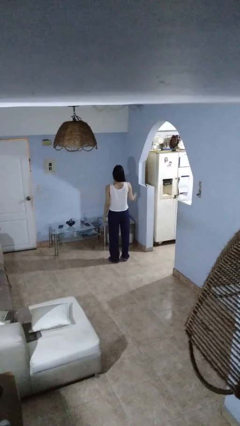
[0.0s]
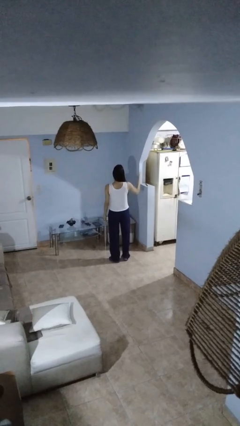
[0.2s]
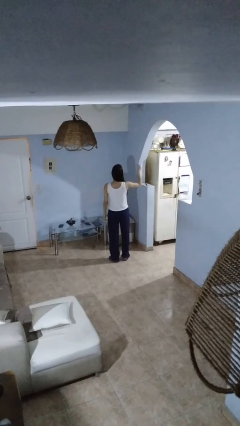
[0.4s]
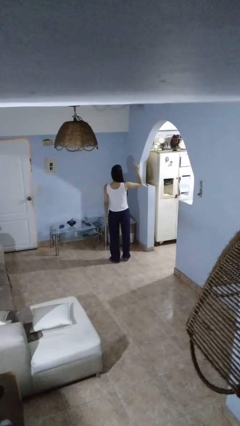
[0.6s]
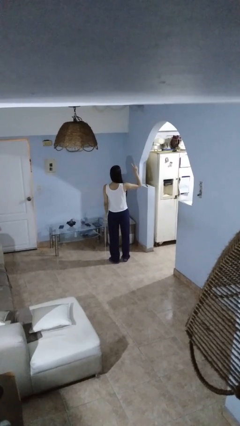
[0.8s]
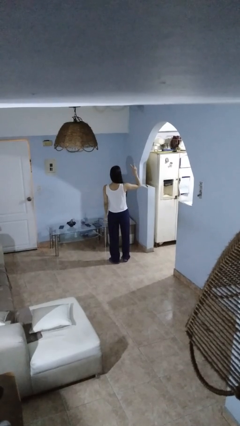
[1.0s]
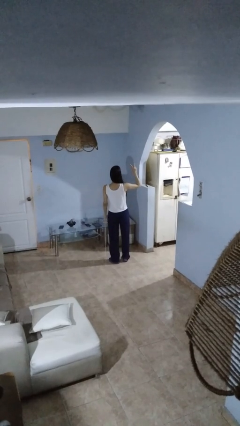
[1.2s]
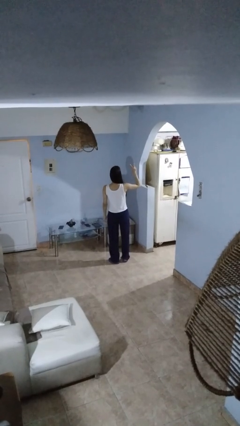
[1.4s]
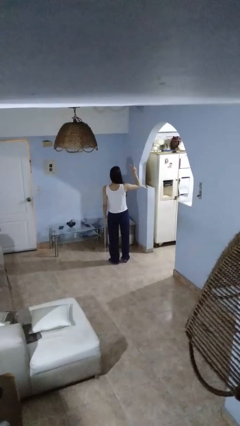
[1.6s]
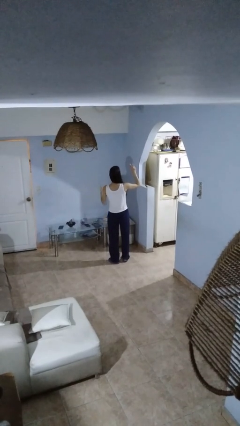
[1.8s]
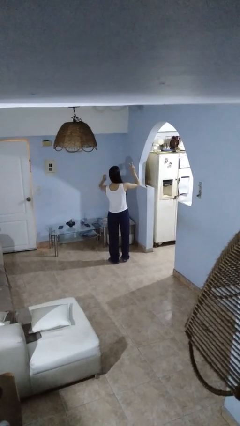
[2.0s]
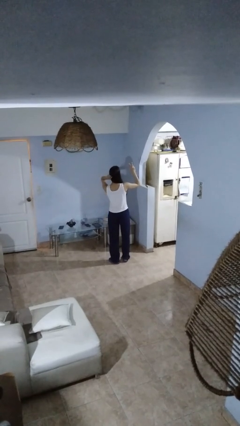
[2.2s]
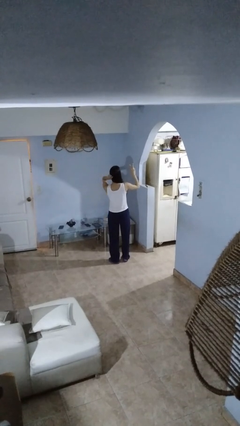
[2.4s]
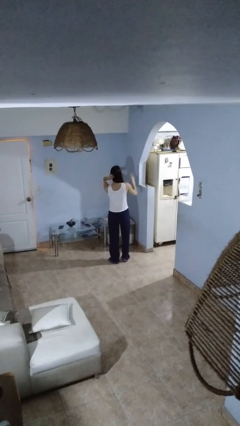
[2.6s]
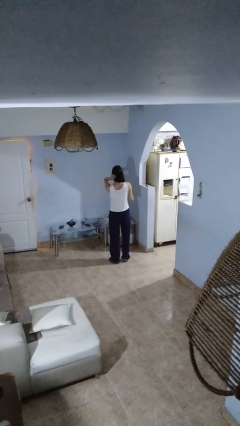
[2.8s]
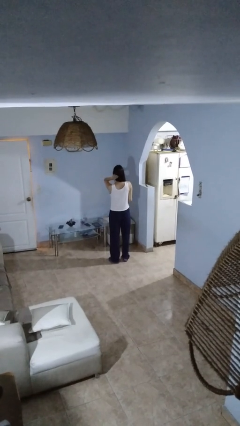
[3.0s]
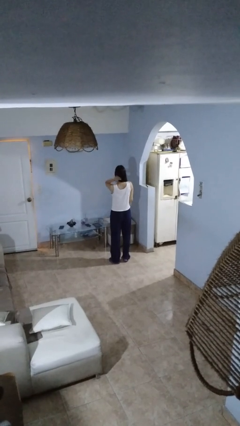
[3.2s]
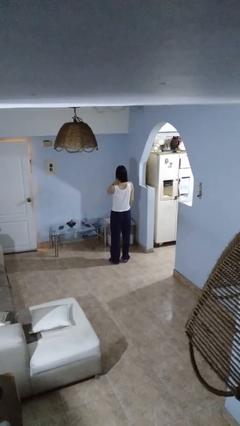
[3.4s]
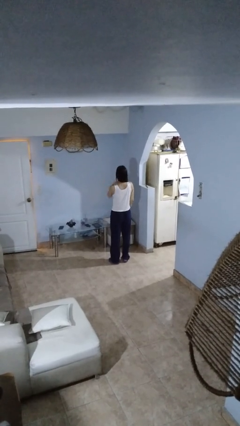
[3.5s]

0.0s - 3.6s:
person gestures peace

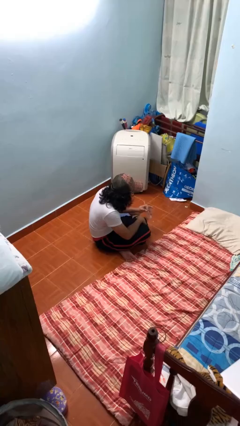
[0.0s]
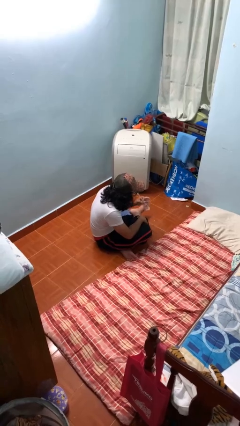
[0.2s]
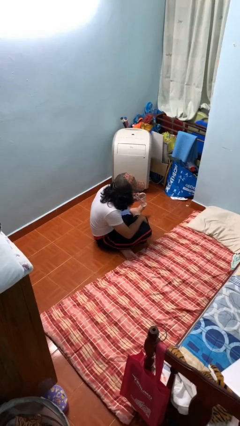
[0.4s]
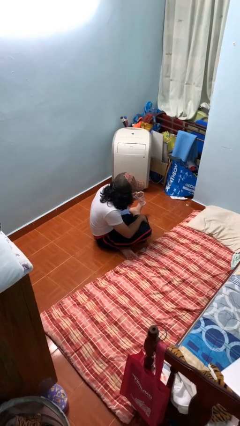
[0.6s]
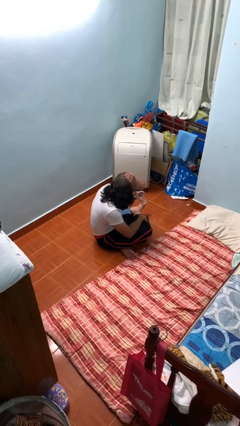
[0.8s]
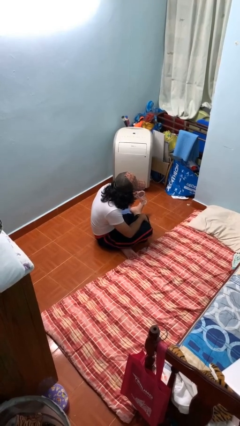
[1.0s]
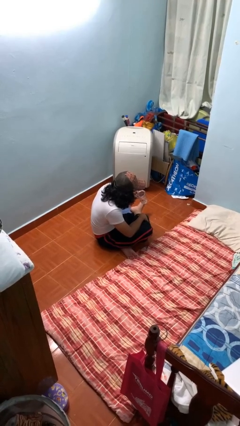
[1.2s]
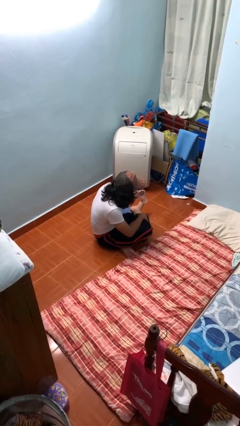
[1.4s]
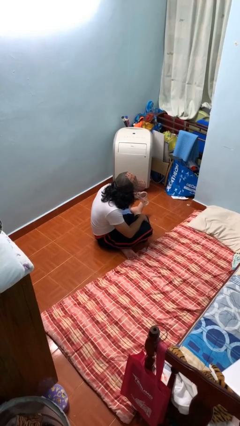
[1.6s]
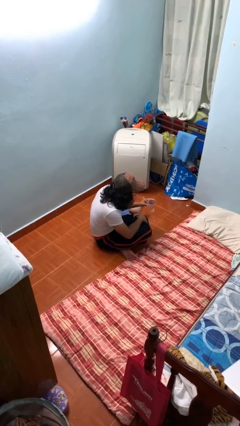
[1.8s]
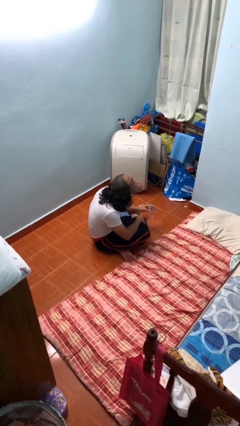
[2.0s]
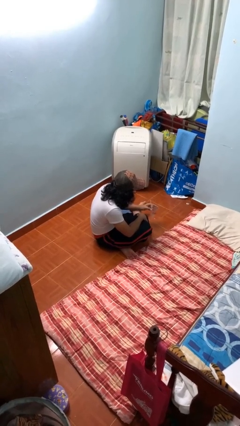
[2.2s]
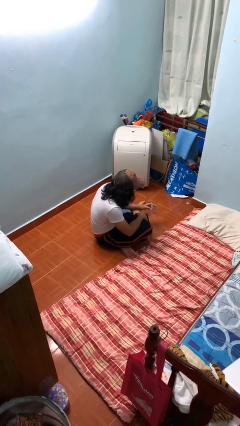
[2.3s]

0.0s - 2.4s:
person drinks from straw

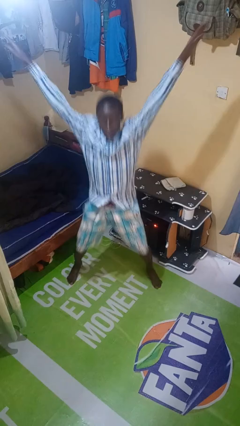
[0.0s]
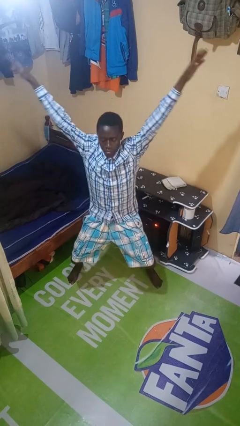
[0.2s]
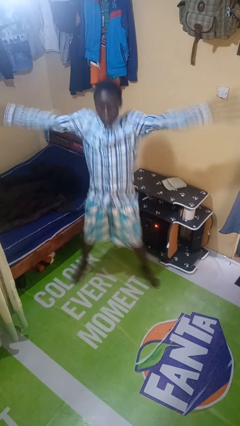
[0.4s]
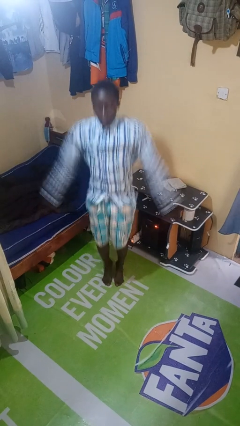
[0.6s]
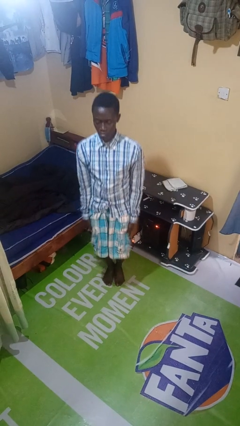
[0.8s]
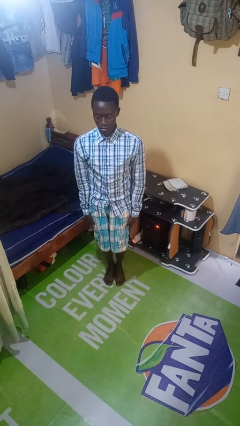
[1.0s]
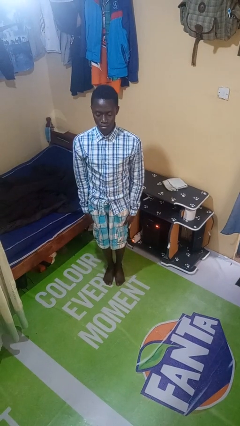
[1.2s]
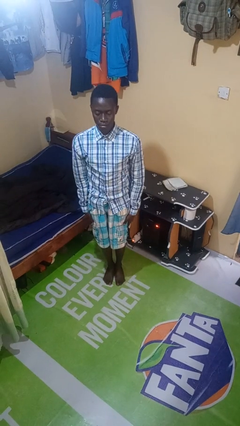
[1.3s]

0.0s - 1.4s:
person exercises with jumping jacks

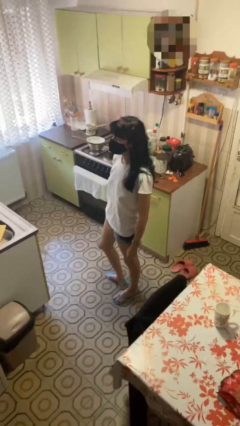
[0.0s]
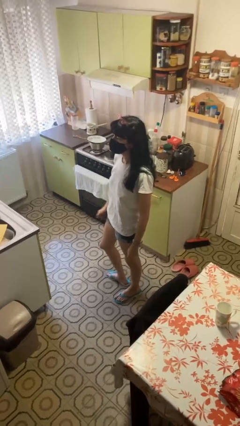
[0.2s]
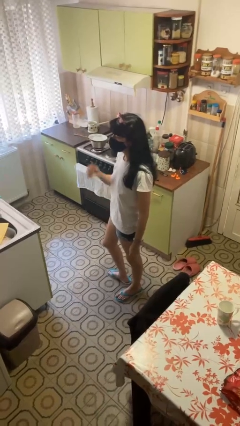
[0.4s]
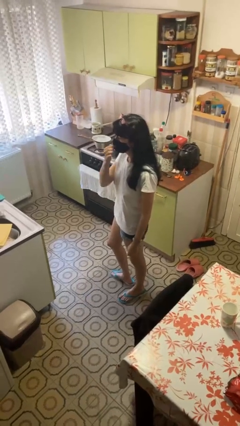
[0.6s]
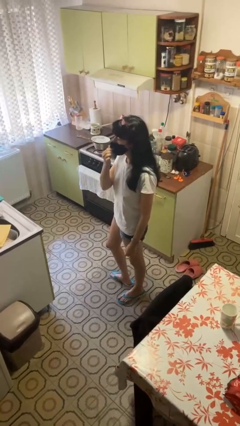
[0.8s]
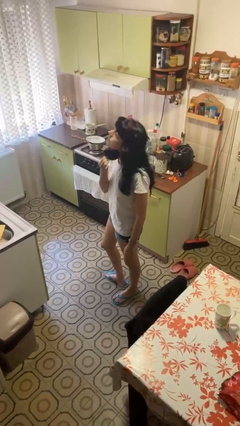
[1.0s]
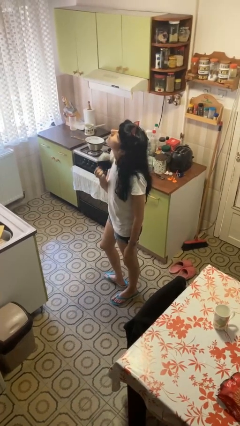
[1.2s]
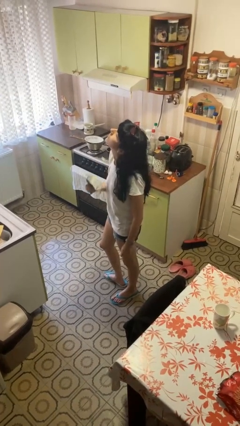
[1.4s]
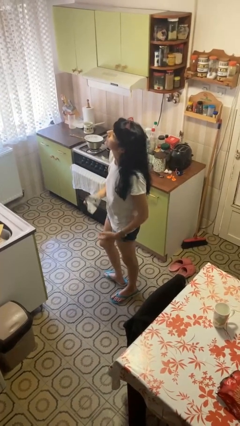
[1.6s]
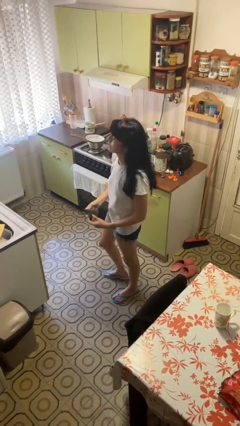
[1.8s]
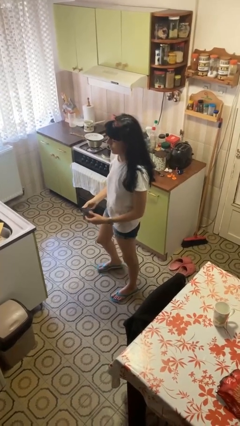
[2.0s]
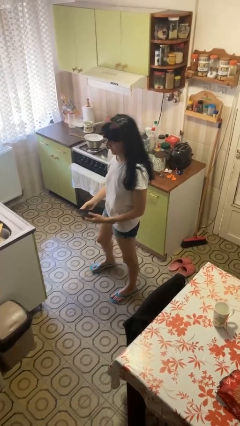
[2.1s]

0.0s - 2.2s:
person takes off facemask

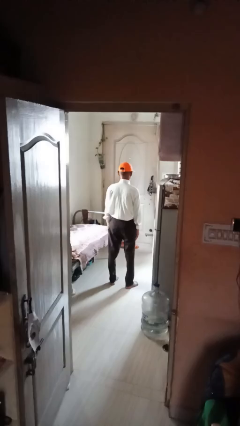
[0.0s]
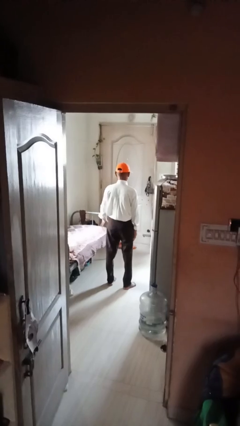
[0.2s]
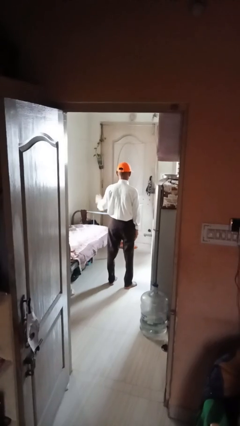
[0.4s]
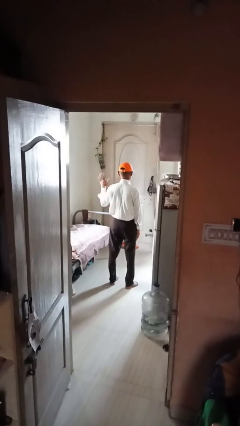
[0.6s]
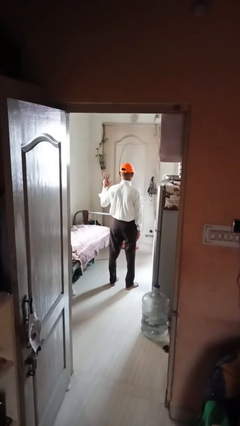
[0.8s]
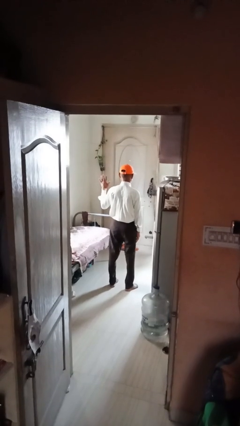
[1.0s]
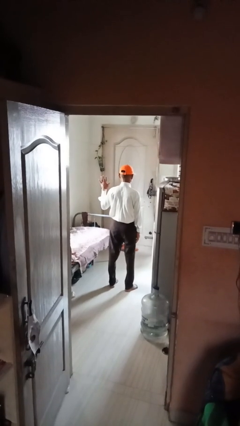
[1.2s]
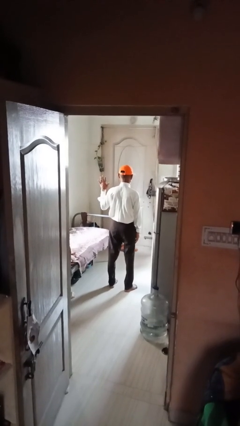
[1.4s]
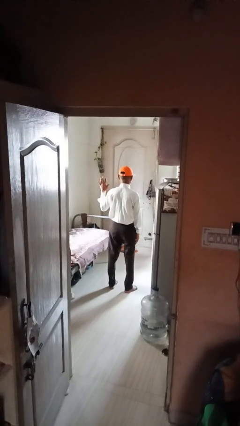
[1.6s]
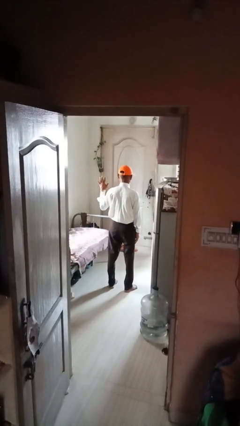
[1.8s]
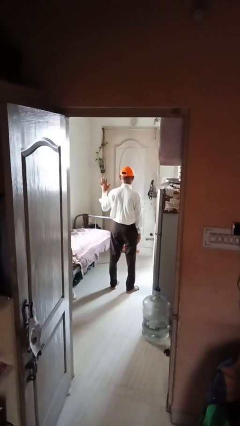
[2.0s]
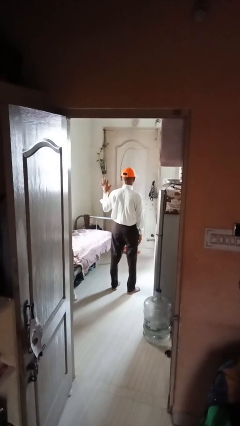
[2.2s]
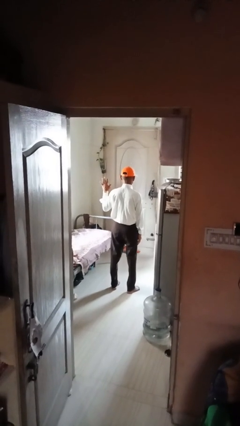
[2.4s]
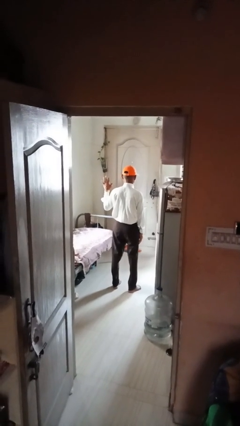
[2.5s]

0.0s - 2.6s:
person gestures number five

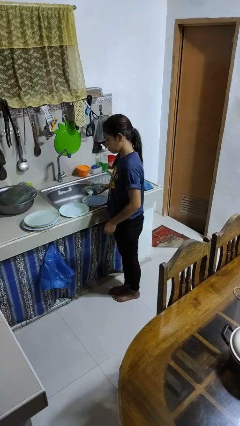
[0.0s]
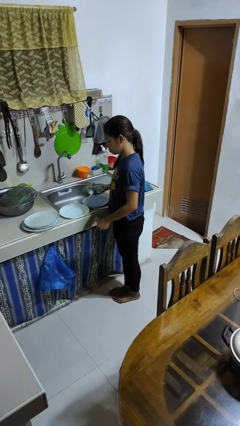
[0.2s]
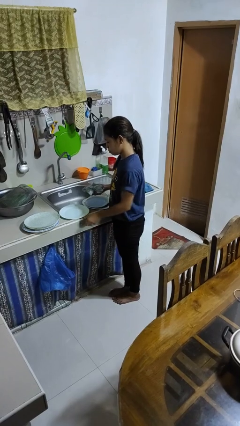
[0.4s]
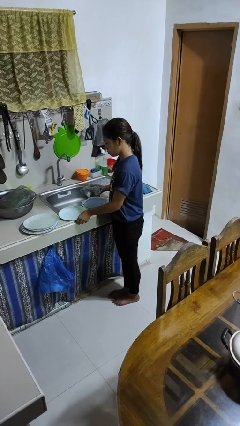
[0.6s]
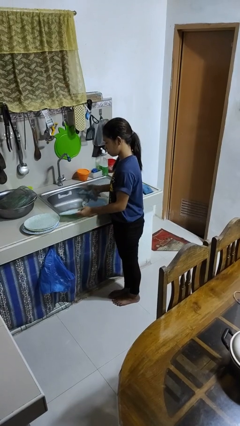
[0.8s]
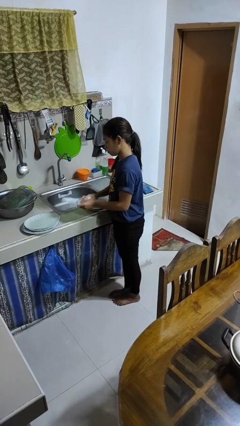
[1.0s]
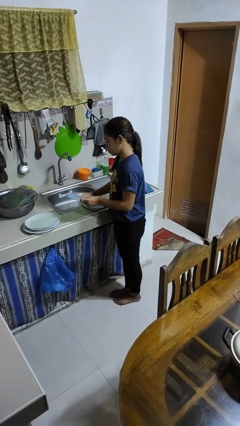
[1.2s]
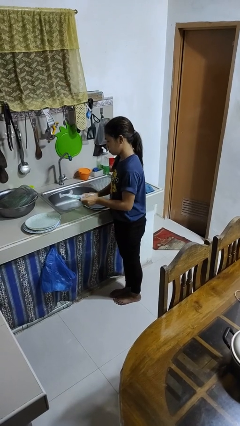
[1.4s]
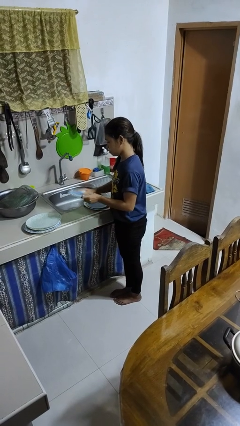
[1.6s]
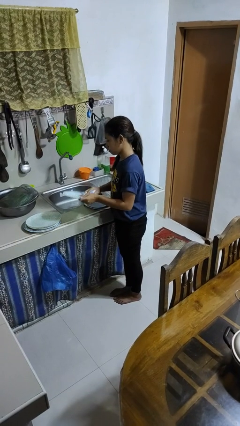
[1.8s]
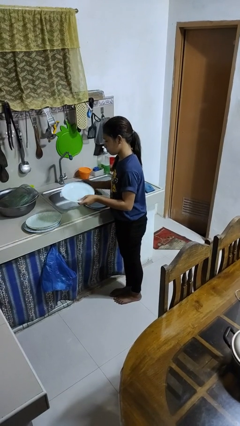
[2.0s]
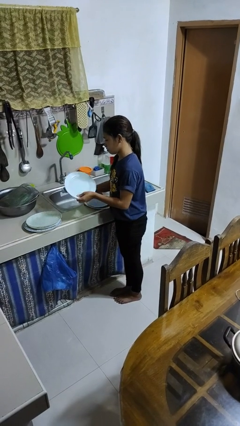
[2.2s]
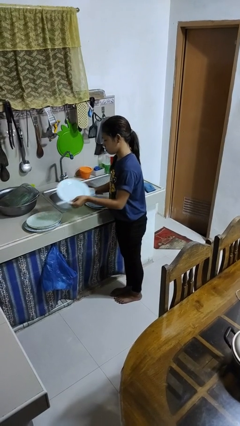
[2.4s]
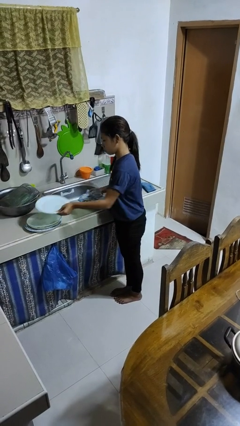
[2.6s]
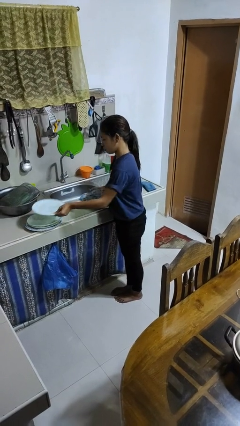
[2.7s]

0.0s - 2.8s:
person dries dish

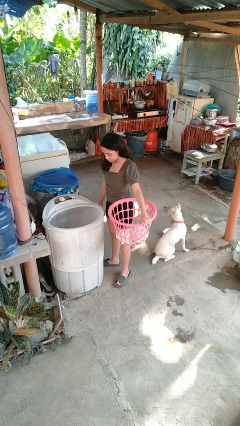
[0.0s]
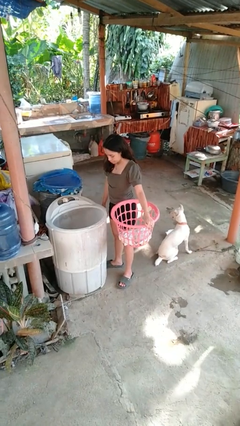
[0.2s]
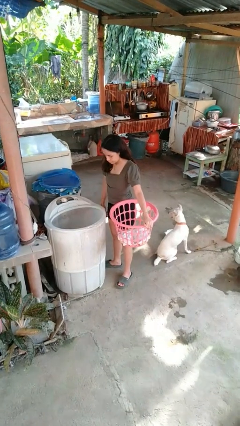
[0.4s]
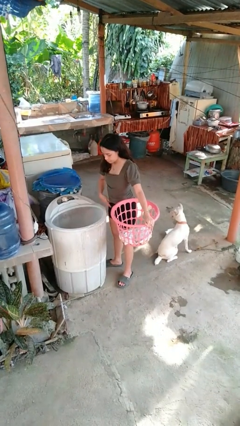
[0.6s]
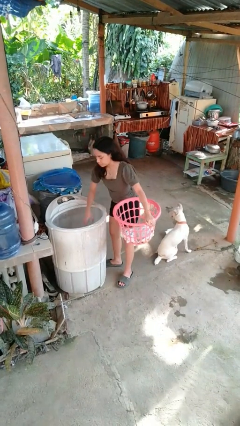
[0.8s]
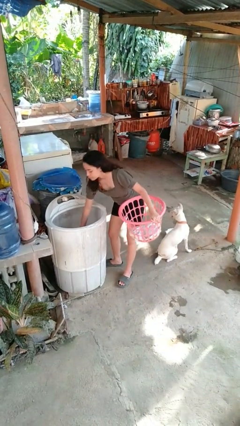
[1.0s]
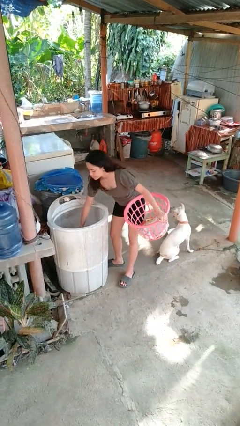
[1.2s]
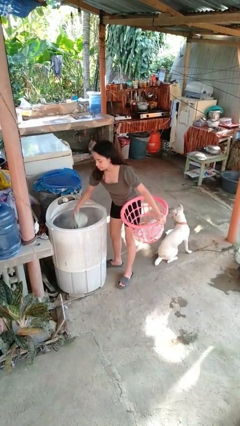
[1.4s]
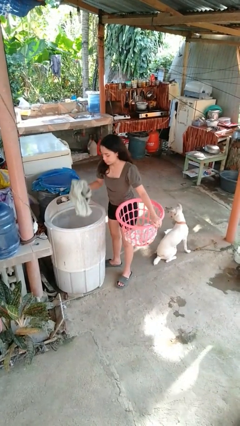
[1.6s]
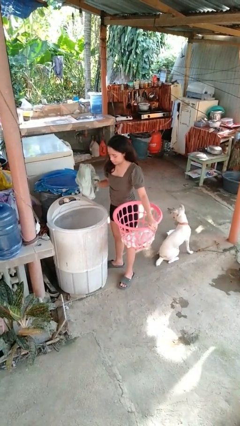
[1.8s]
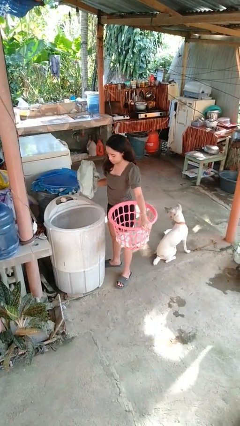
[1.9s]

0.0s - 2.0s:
person unloads dryer

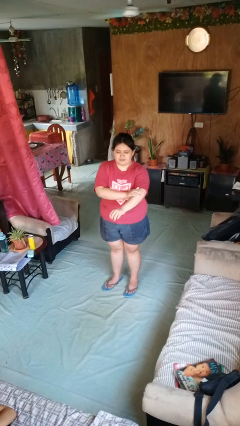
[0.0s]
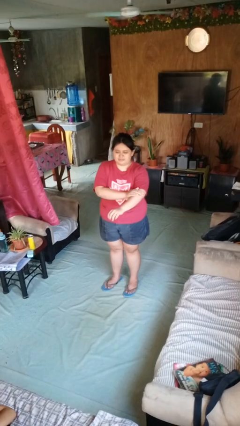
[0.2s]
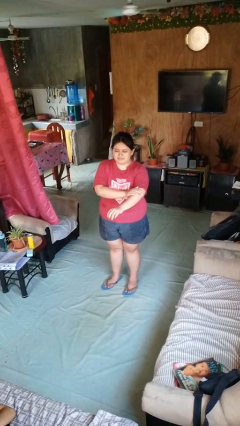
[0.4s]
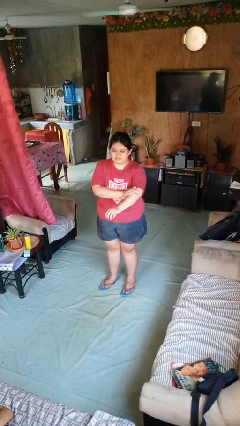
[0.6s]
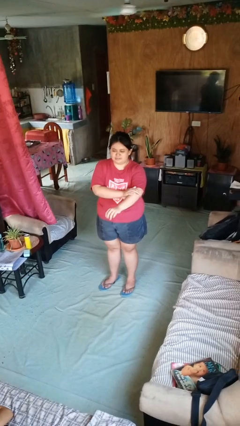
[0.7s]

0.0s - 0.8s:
person swats bug
